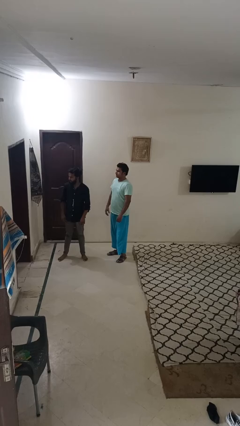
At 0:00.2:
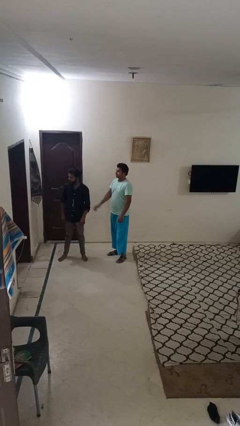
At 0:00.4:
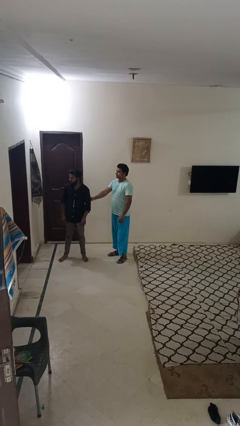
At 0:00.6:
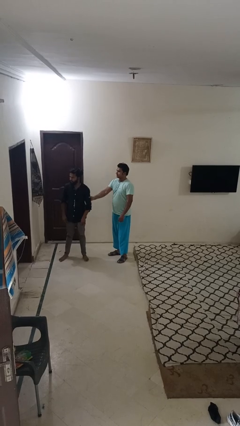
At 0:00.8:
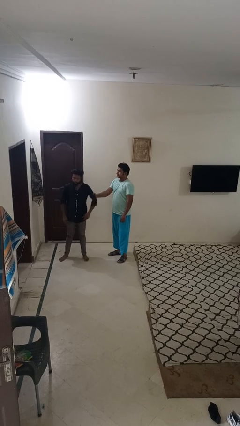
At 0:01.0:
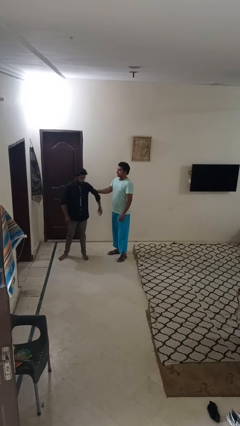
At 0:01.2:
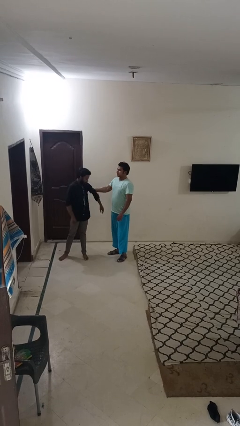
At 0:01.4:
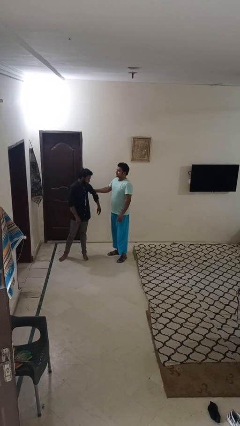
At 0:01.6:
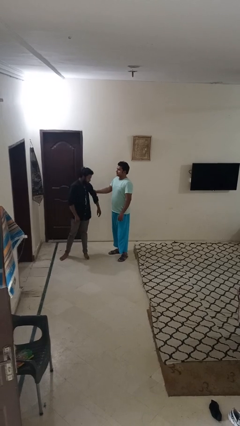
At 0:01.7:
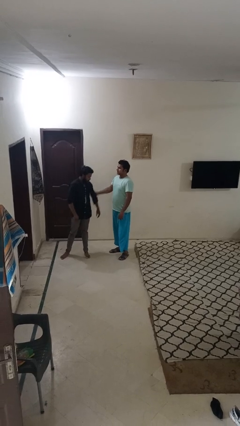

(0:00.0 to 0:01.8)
person grabs person by bicep

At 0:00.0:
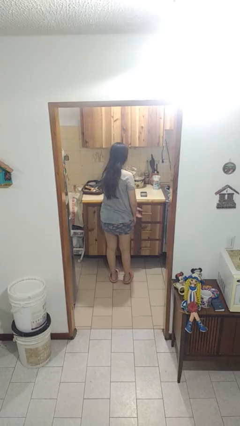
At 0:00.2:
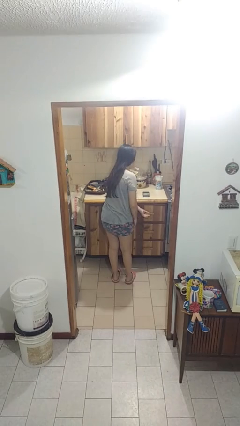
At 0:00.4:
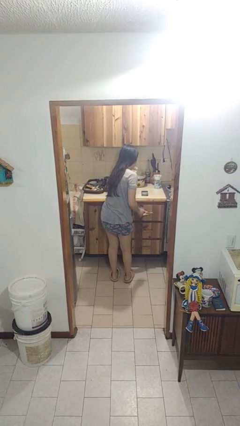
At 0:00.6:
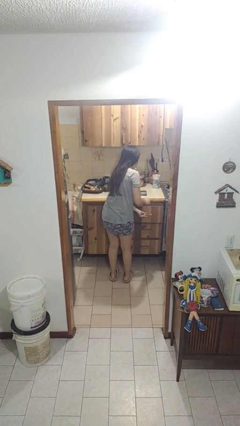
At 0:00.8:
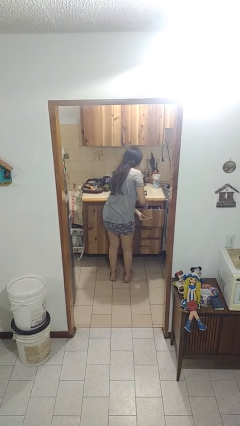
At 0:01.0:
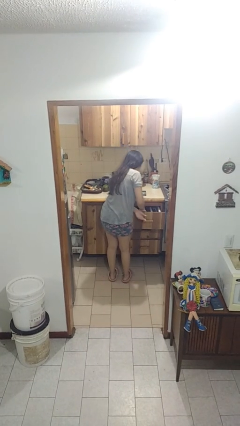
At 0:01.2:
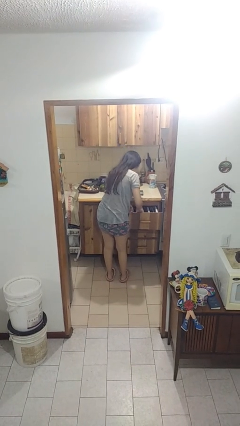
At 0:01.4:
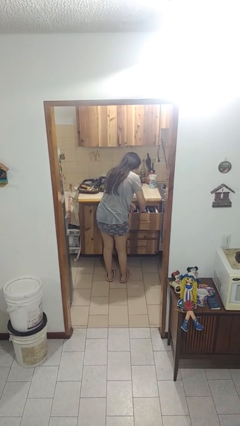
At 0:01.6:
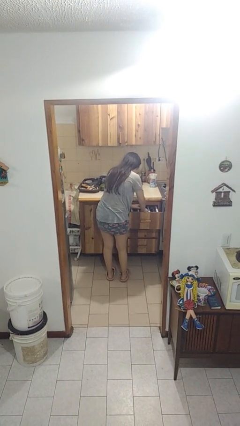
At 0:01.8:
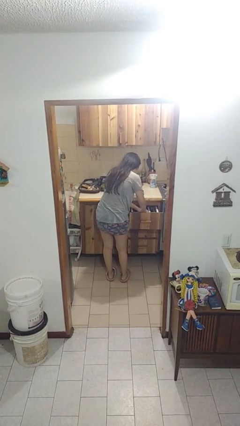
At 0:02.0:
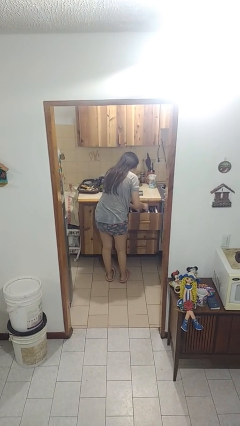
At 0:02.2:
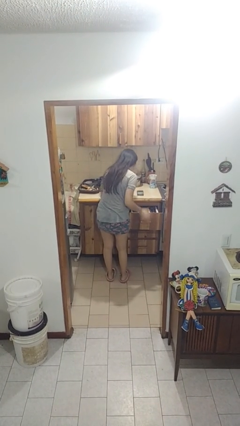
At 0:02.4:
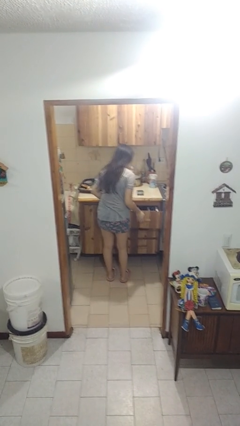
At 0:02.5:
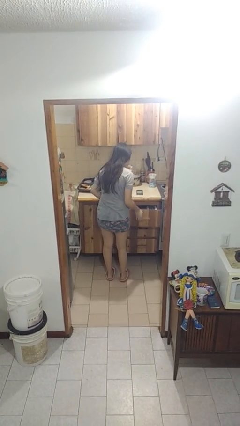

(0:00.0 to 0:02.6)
person searches in kitchen drawer

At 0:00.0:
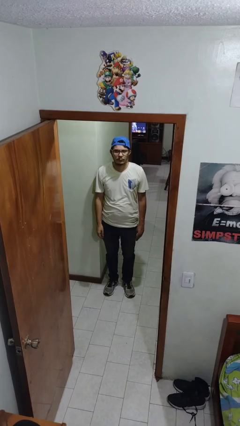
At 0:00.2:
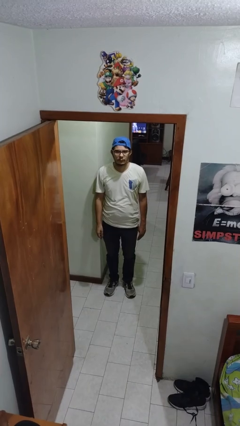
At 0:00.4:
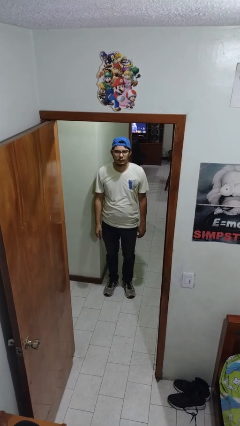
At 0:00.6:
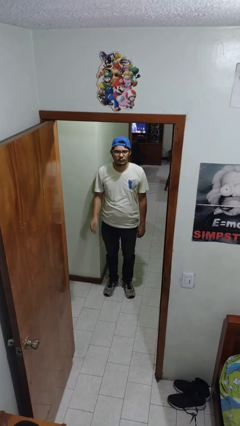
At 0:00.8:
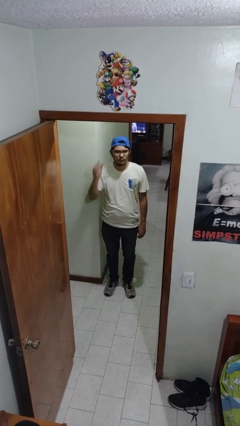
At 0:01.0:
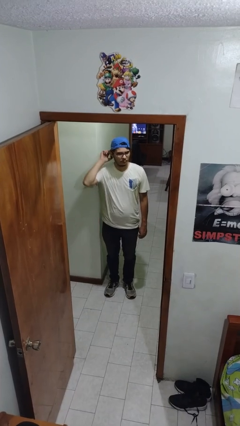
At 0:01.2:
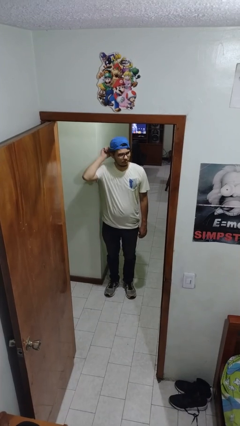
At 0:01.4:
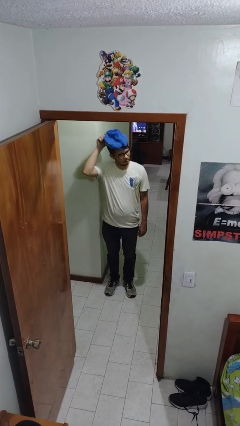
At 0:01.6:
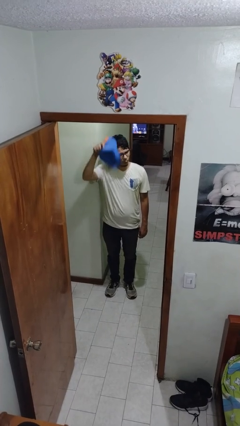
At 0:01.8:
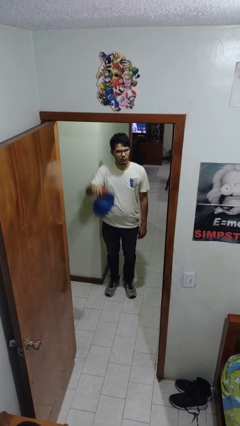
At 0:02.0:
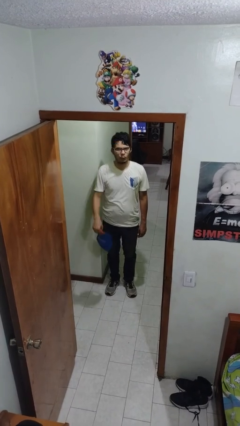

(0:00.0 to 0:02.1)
person takes off hat

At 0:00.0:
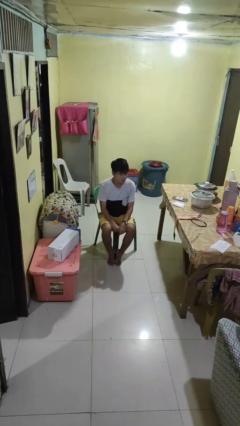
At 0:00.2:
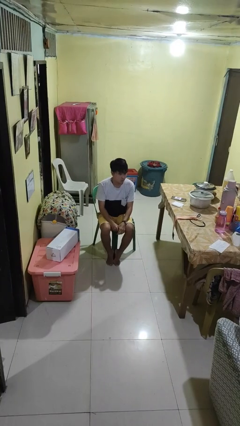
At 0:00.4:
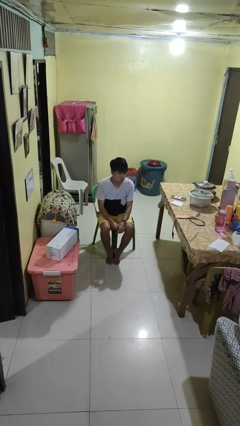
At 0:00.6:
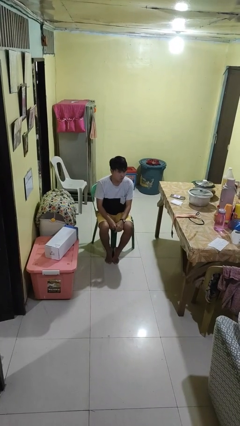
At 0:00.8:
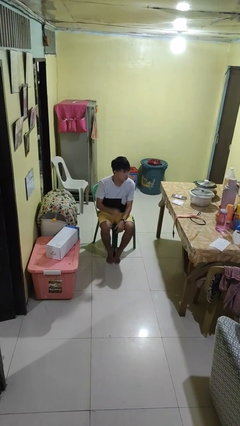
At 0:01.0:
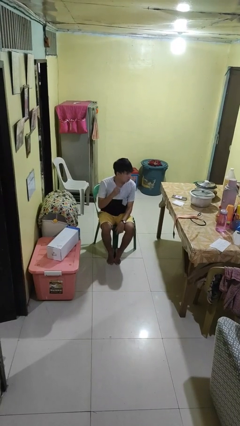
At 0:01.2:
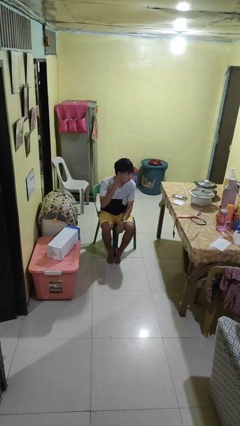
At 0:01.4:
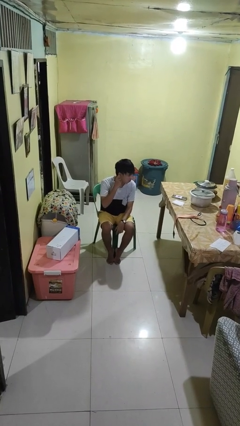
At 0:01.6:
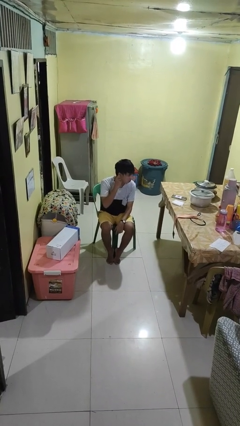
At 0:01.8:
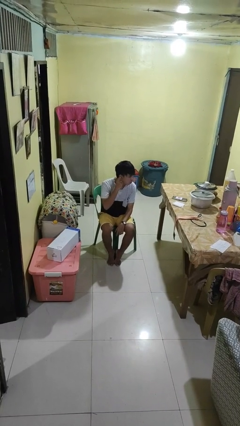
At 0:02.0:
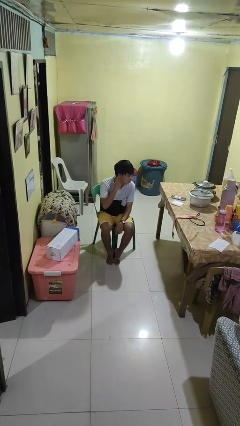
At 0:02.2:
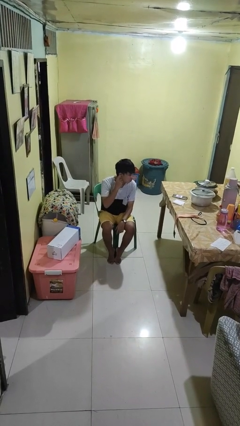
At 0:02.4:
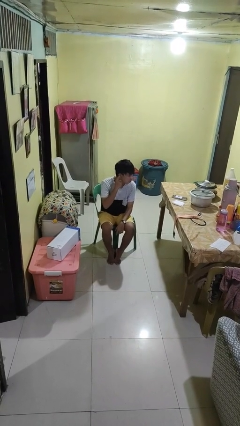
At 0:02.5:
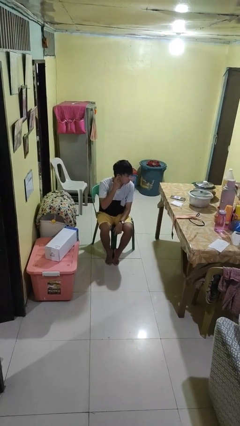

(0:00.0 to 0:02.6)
person gestures listen closely

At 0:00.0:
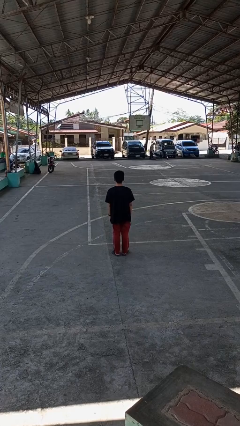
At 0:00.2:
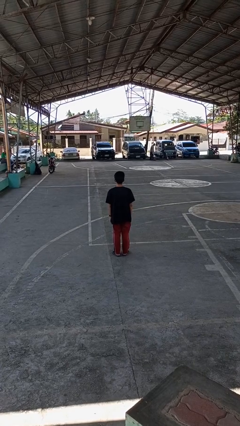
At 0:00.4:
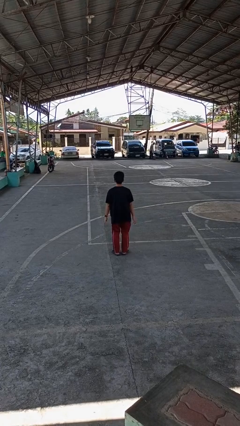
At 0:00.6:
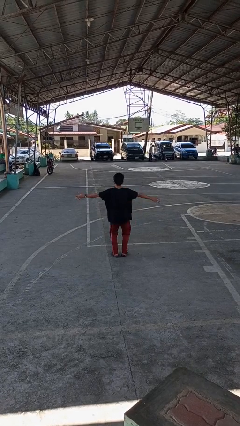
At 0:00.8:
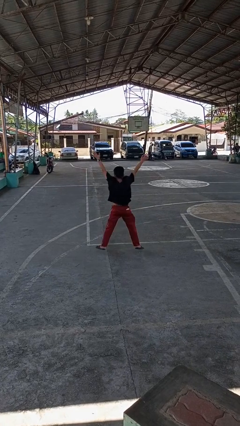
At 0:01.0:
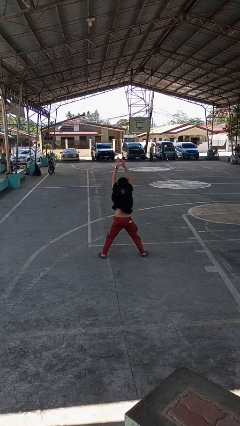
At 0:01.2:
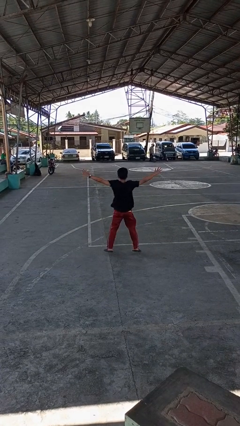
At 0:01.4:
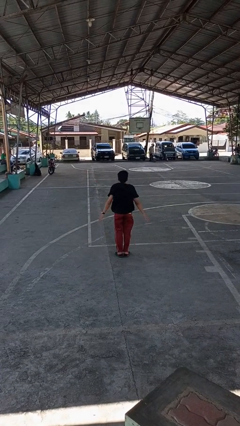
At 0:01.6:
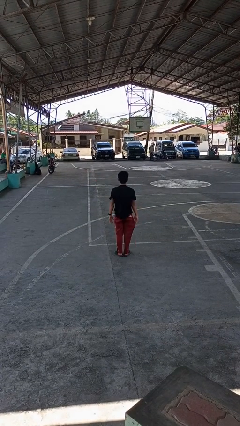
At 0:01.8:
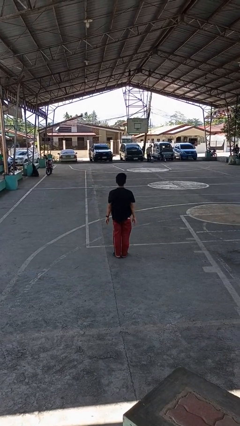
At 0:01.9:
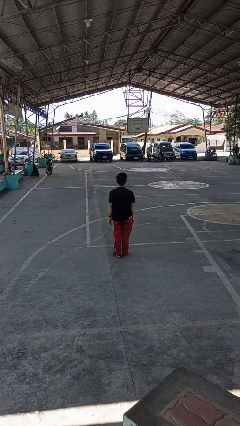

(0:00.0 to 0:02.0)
person exercises with jumping jacks

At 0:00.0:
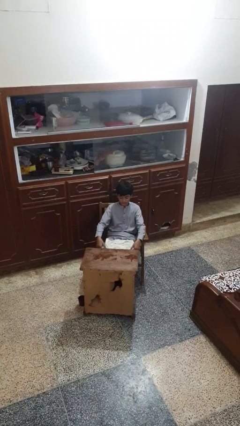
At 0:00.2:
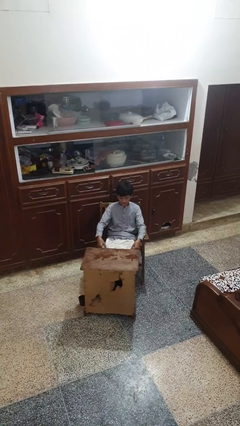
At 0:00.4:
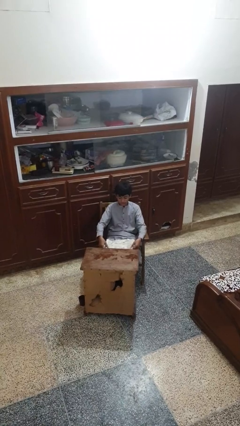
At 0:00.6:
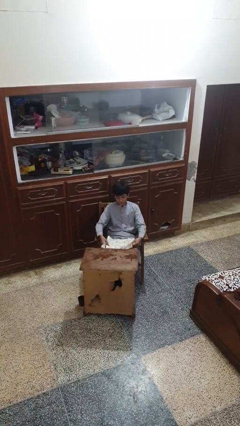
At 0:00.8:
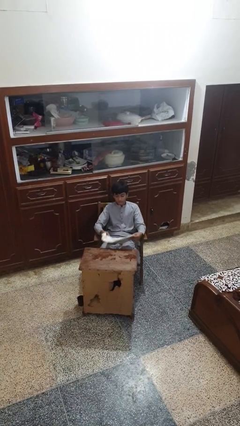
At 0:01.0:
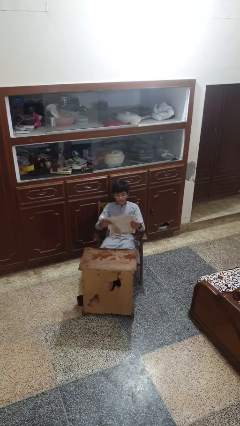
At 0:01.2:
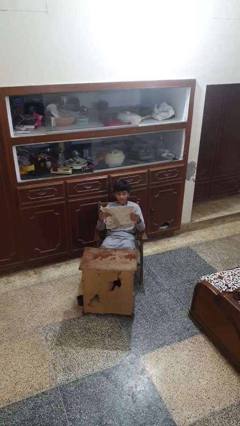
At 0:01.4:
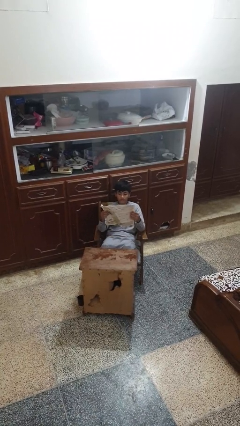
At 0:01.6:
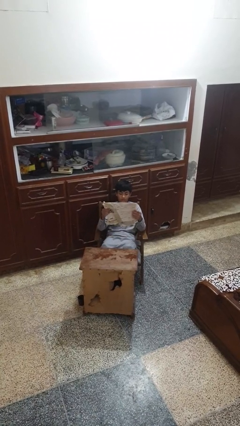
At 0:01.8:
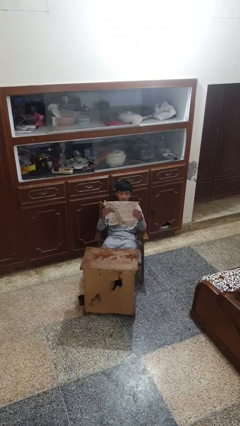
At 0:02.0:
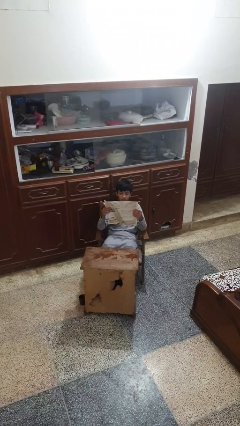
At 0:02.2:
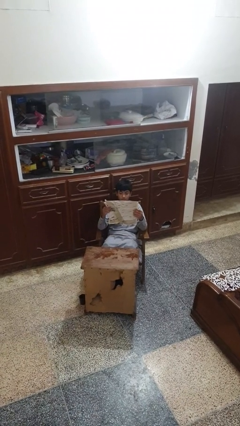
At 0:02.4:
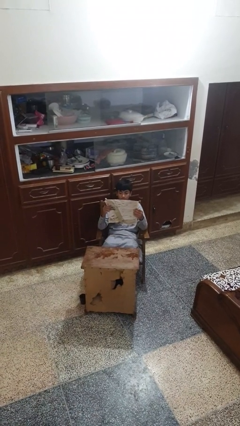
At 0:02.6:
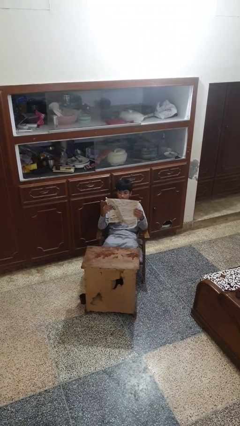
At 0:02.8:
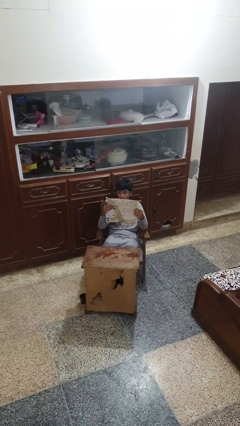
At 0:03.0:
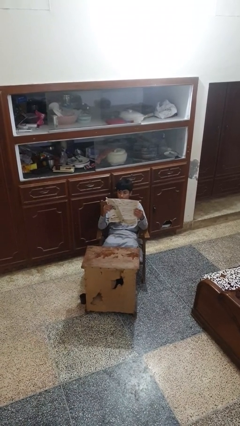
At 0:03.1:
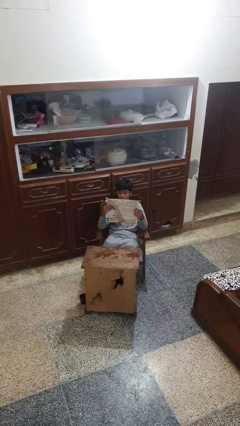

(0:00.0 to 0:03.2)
person reads newspaper

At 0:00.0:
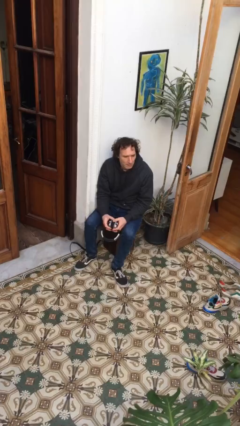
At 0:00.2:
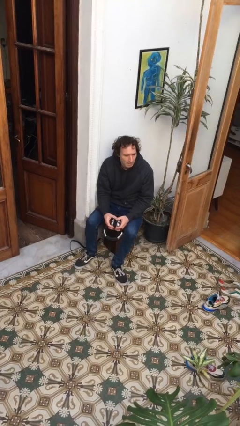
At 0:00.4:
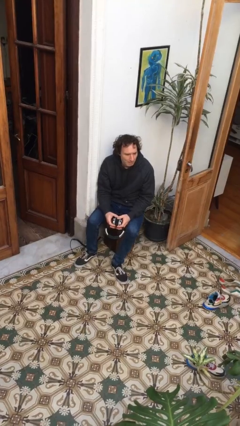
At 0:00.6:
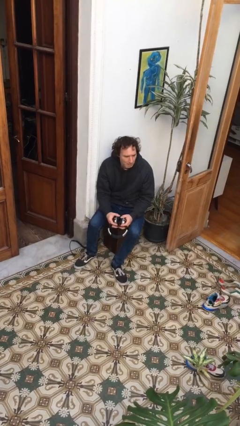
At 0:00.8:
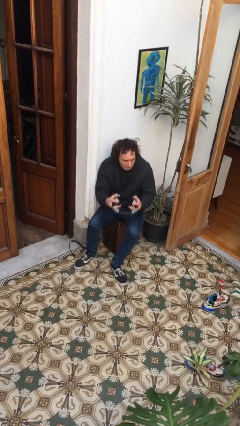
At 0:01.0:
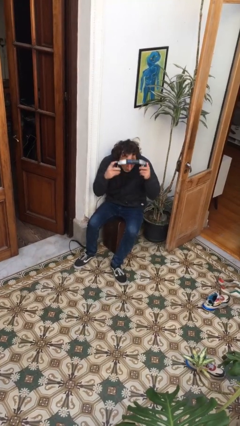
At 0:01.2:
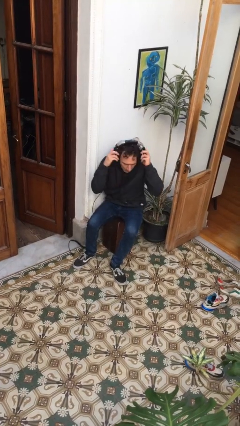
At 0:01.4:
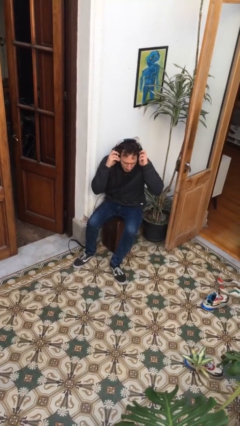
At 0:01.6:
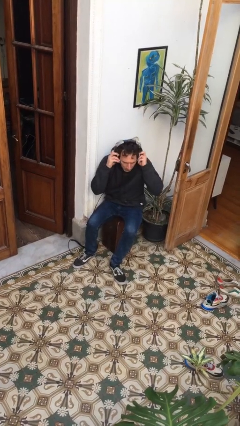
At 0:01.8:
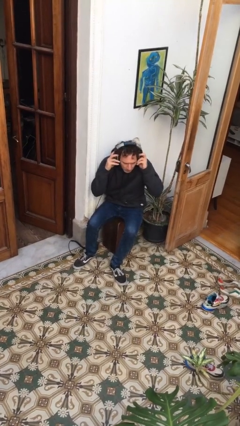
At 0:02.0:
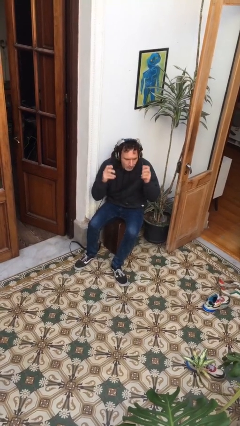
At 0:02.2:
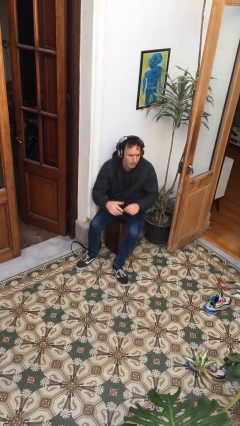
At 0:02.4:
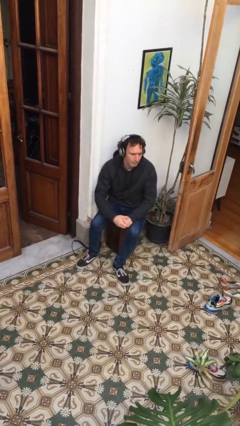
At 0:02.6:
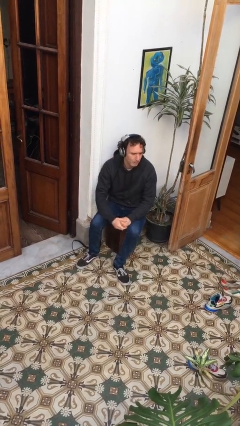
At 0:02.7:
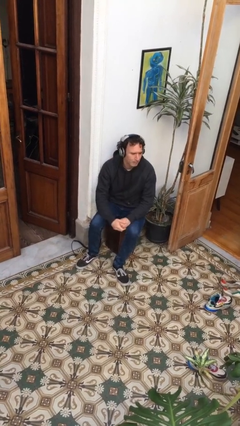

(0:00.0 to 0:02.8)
person puts on headphones

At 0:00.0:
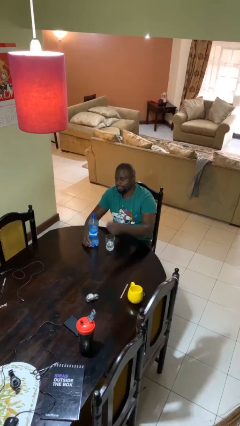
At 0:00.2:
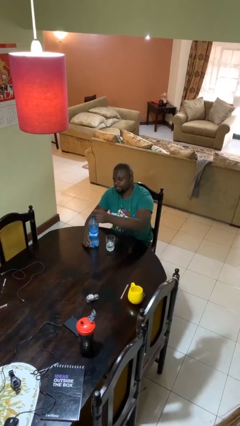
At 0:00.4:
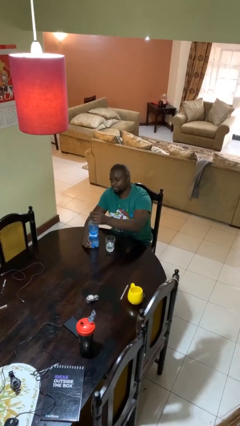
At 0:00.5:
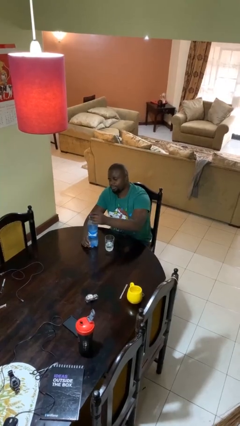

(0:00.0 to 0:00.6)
person pours liquid into cup
